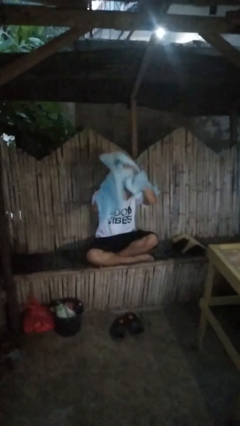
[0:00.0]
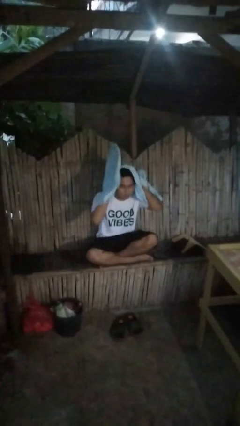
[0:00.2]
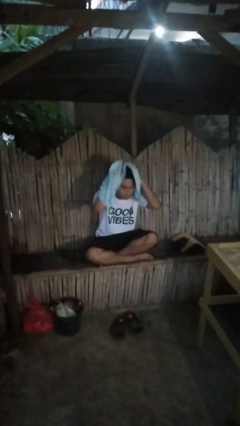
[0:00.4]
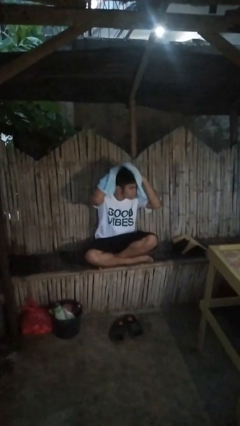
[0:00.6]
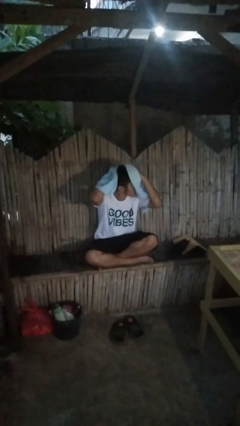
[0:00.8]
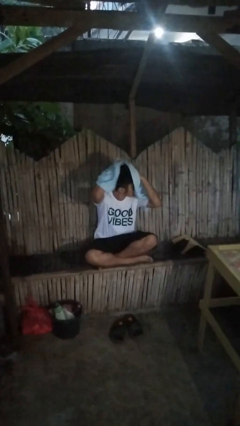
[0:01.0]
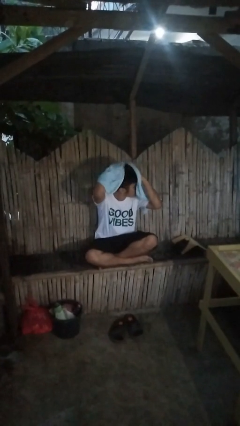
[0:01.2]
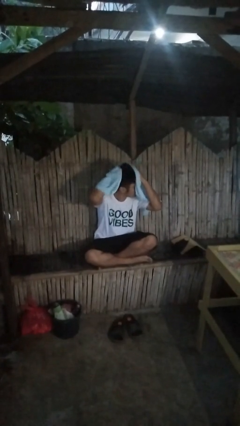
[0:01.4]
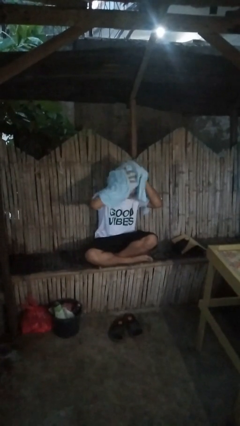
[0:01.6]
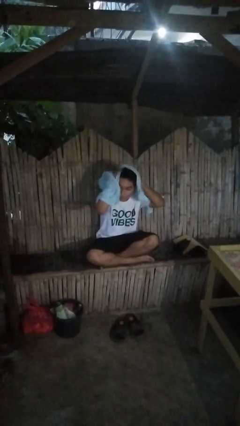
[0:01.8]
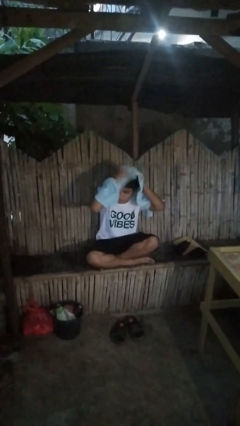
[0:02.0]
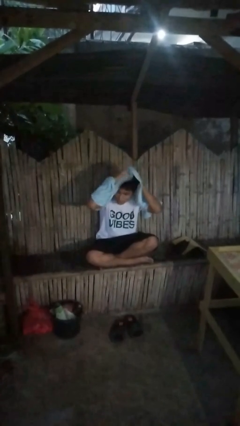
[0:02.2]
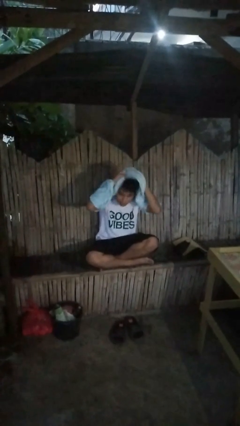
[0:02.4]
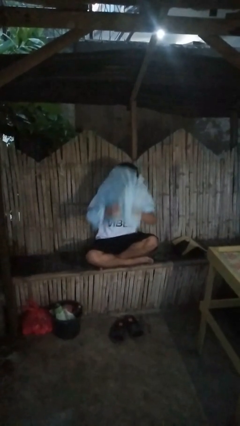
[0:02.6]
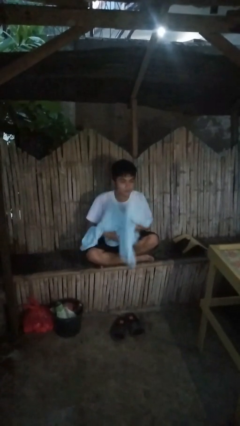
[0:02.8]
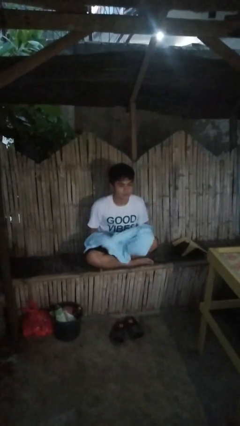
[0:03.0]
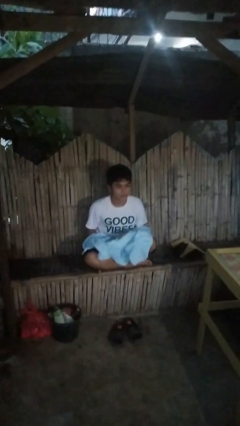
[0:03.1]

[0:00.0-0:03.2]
person dries hair with towel

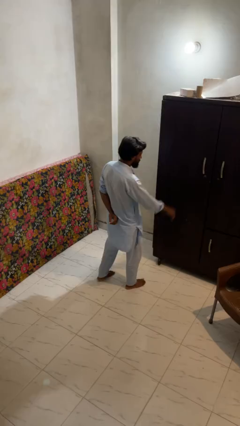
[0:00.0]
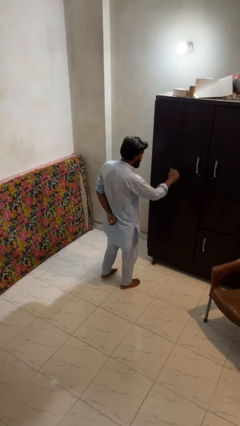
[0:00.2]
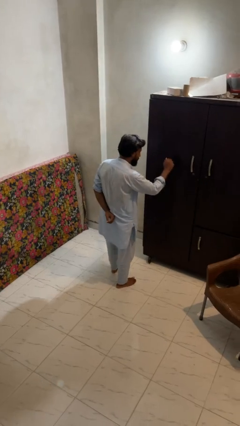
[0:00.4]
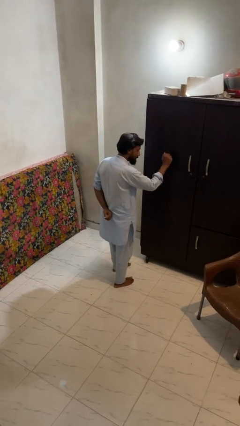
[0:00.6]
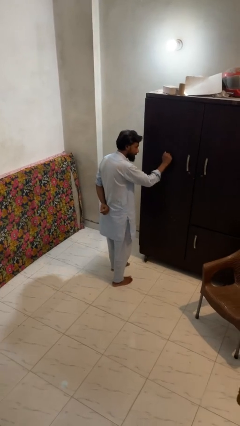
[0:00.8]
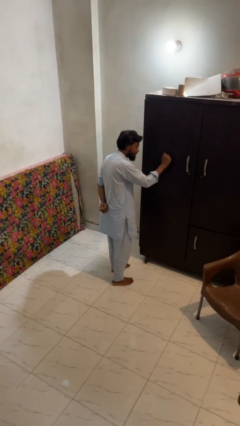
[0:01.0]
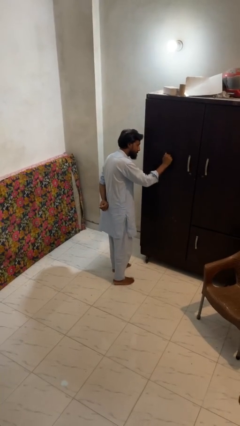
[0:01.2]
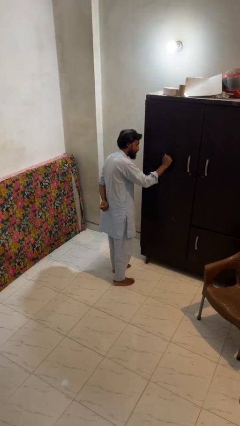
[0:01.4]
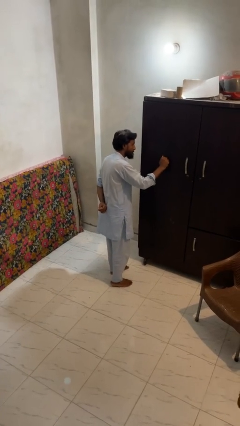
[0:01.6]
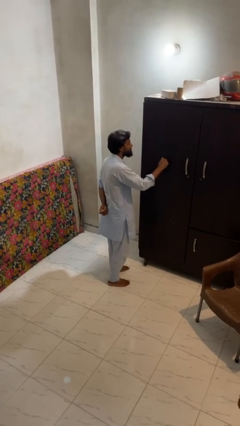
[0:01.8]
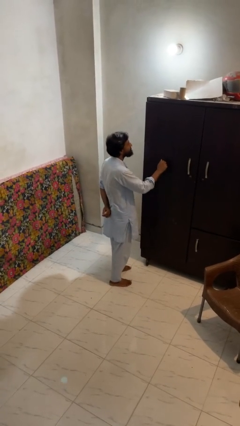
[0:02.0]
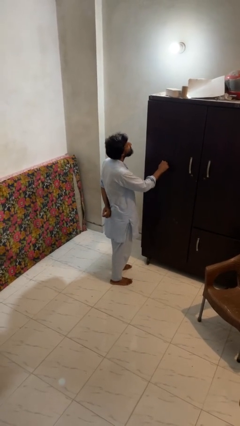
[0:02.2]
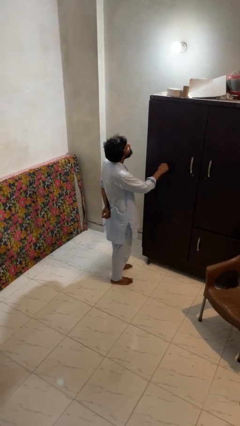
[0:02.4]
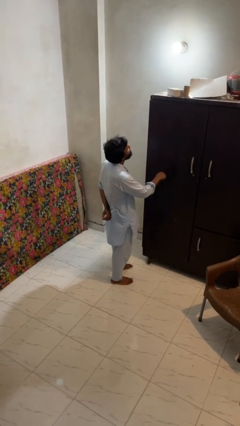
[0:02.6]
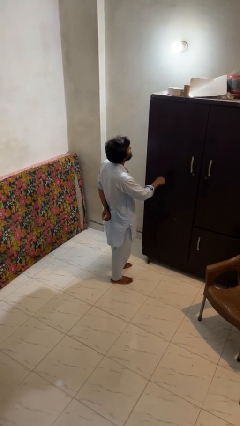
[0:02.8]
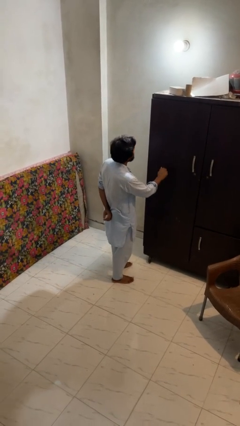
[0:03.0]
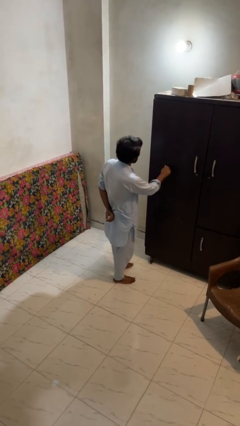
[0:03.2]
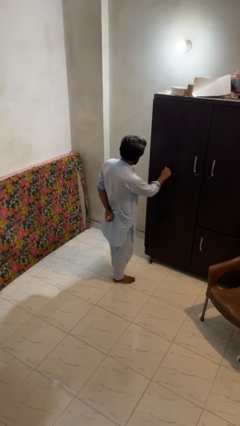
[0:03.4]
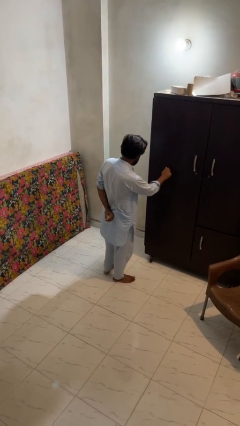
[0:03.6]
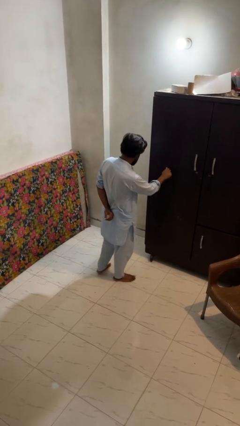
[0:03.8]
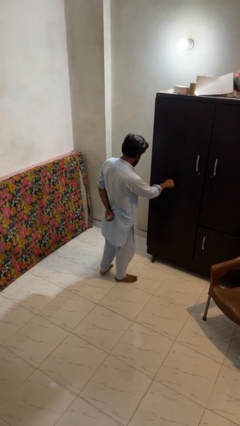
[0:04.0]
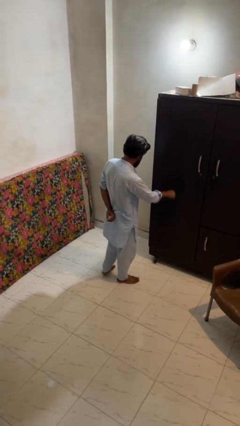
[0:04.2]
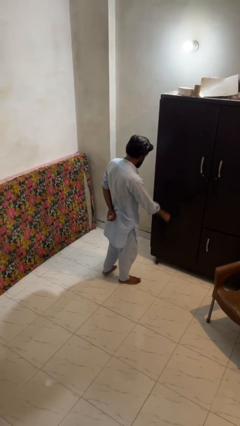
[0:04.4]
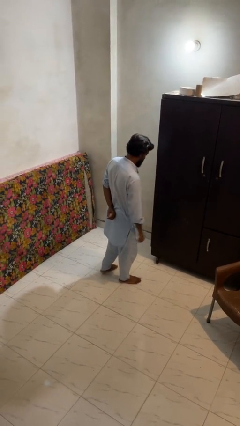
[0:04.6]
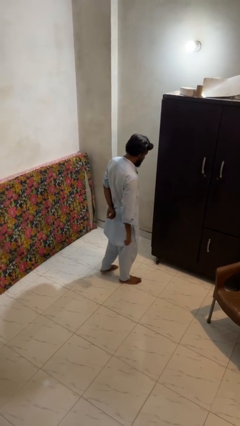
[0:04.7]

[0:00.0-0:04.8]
person taps object with finger

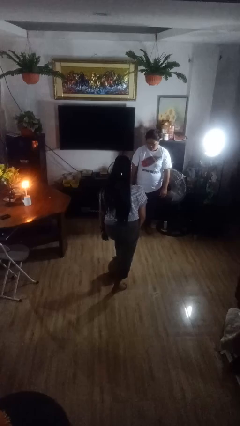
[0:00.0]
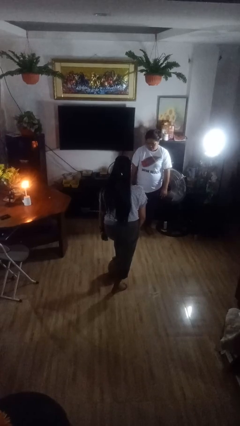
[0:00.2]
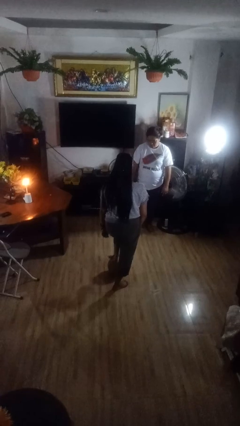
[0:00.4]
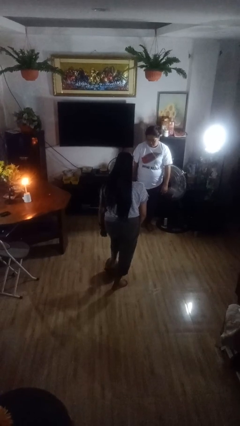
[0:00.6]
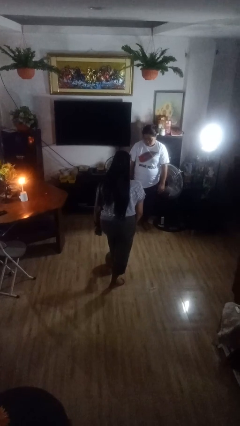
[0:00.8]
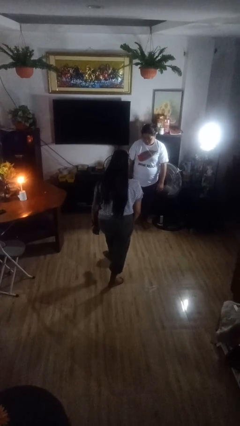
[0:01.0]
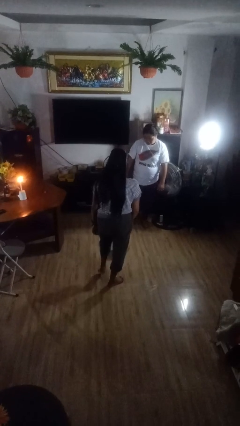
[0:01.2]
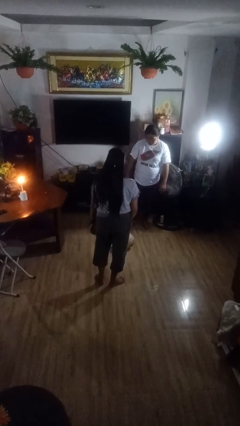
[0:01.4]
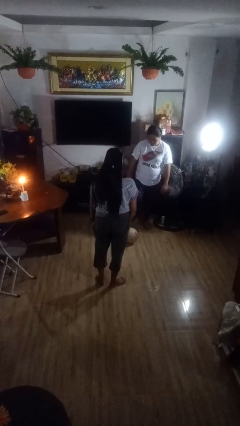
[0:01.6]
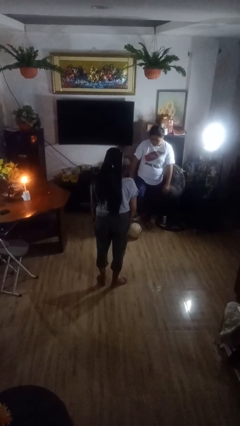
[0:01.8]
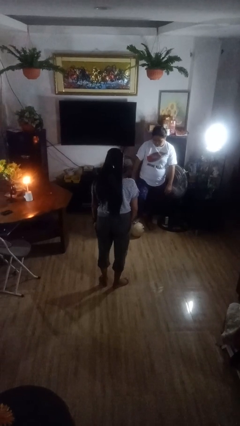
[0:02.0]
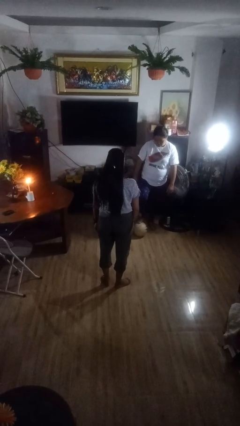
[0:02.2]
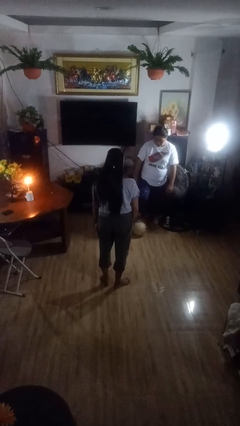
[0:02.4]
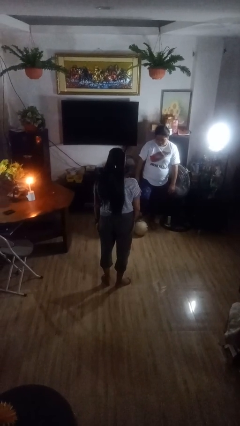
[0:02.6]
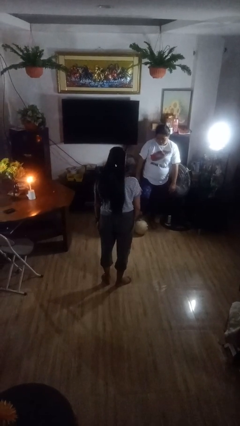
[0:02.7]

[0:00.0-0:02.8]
person kicks object to person

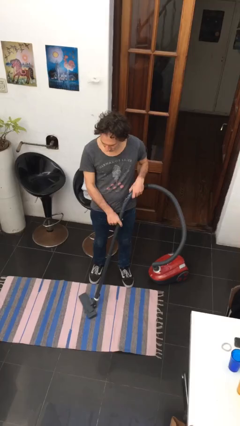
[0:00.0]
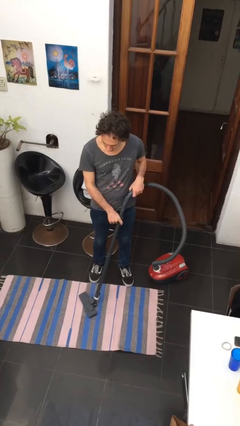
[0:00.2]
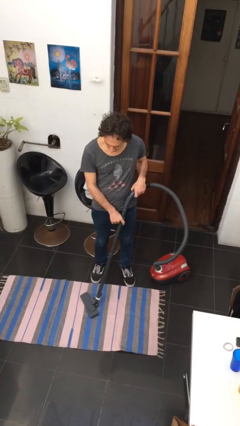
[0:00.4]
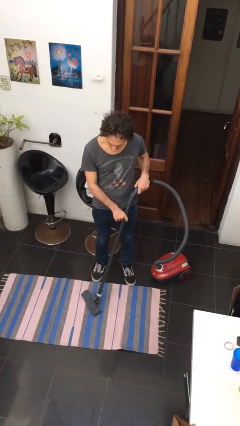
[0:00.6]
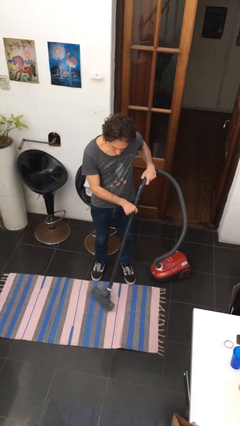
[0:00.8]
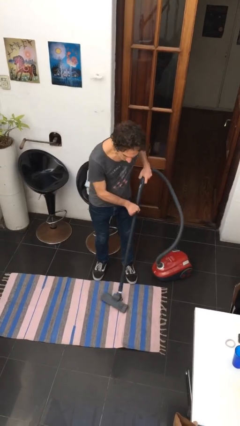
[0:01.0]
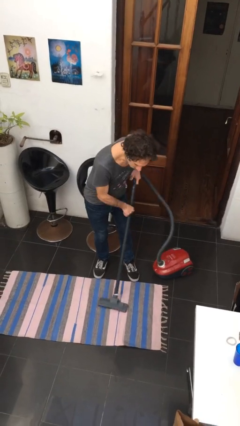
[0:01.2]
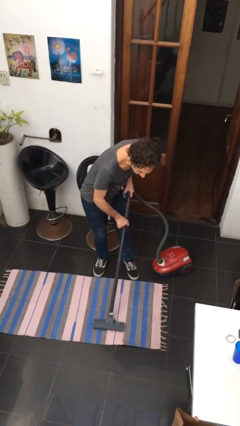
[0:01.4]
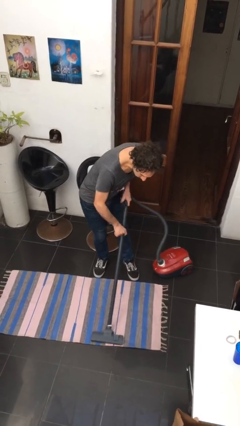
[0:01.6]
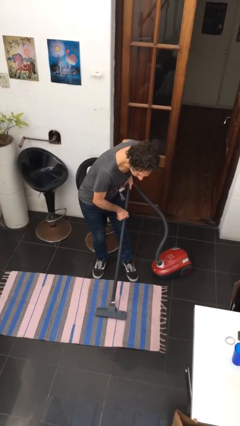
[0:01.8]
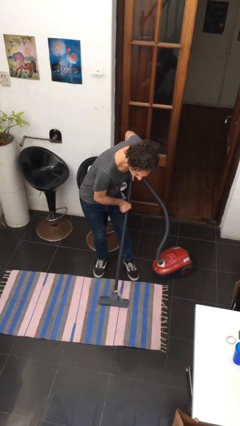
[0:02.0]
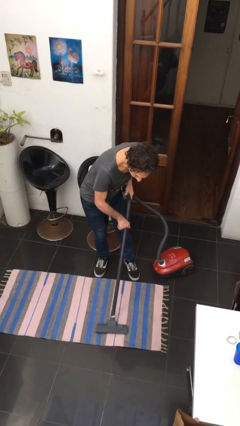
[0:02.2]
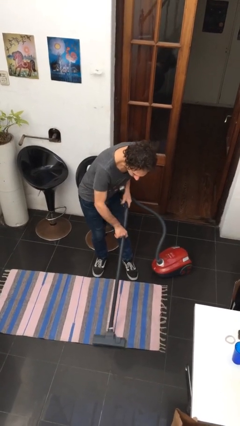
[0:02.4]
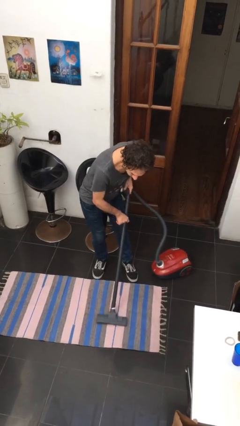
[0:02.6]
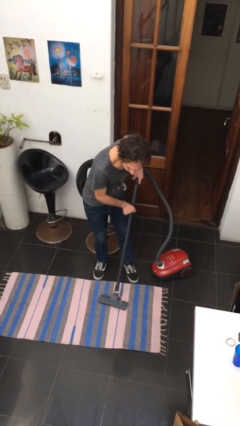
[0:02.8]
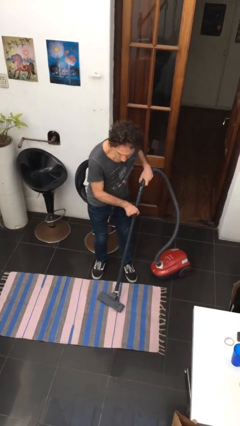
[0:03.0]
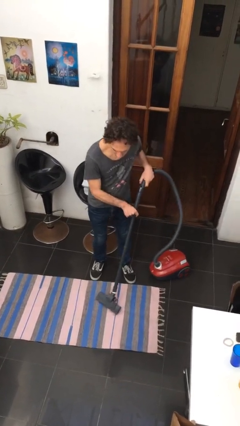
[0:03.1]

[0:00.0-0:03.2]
person vacuums carpet

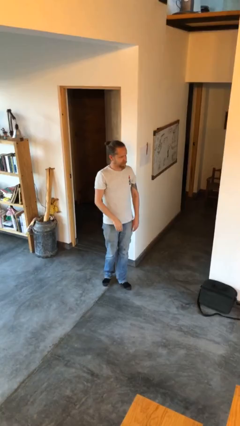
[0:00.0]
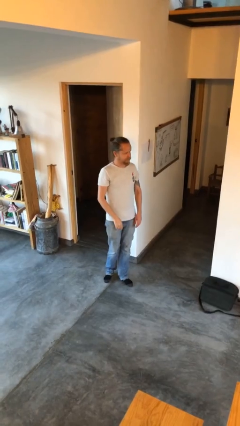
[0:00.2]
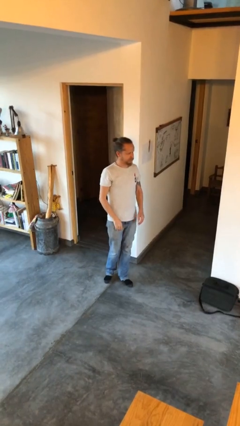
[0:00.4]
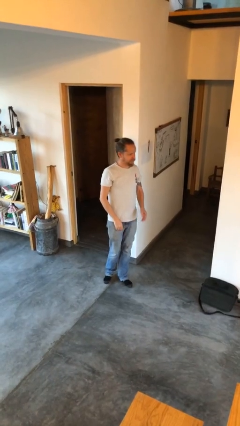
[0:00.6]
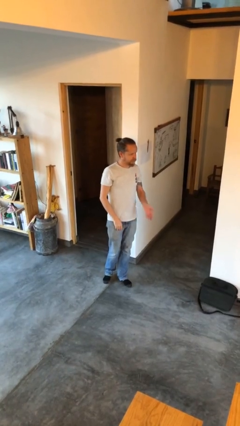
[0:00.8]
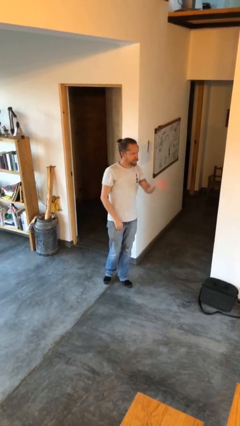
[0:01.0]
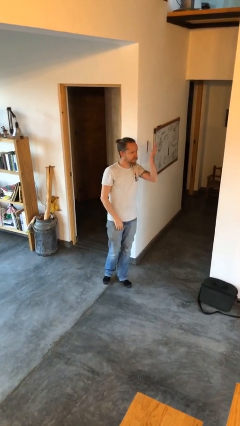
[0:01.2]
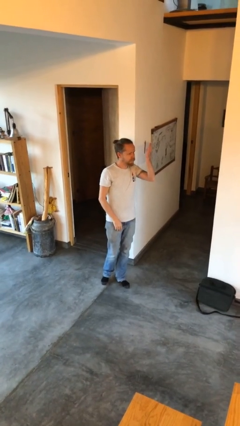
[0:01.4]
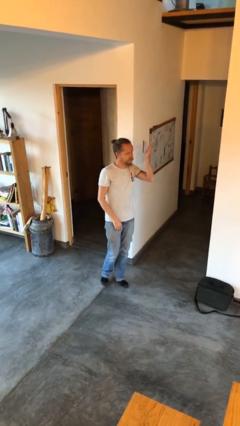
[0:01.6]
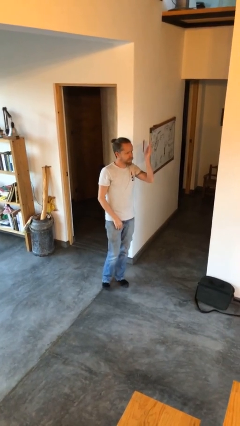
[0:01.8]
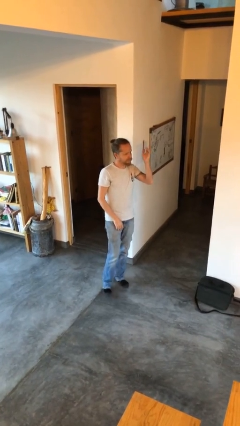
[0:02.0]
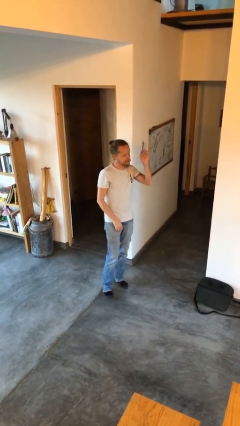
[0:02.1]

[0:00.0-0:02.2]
person gestures swipe up

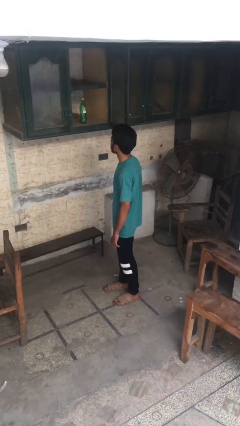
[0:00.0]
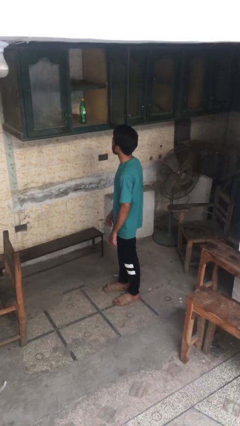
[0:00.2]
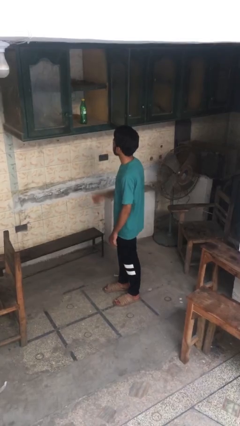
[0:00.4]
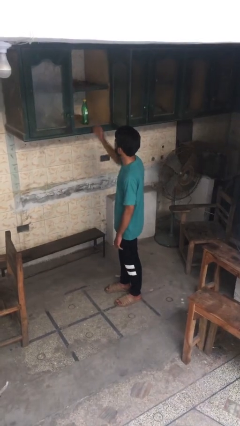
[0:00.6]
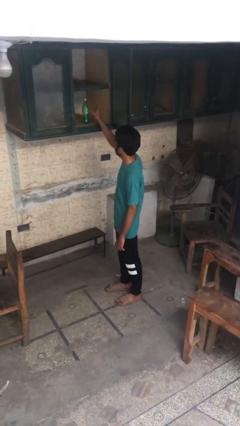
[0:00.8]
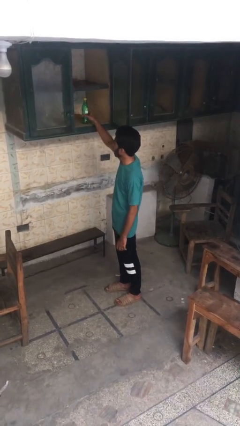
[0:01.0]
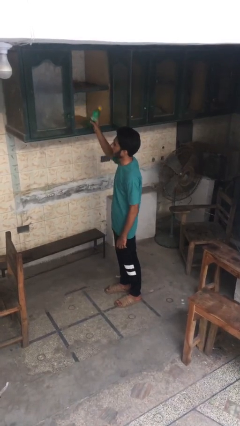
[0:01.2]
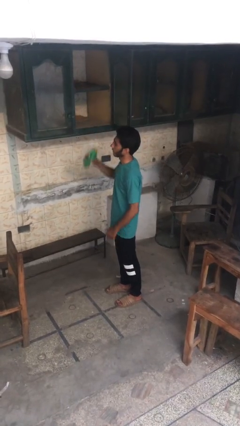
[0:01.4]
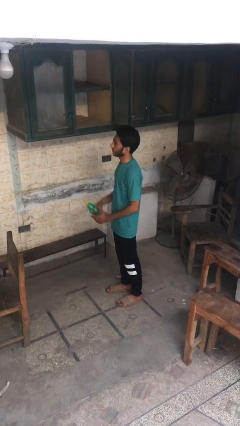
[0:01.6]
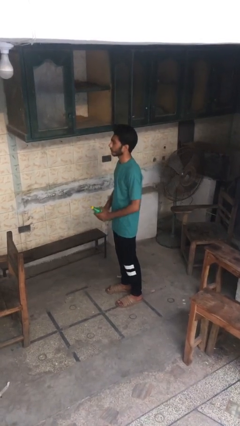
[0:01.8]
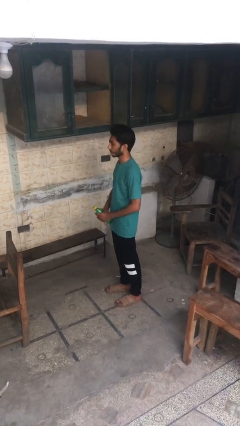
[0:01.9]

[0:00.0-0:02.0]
person takes object from cabinet
